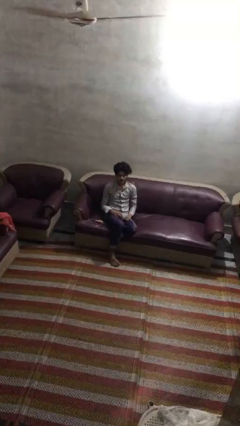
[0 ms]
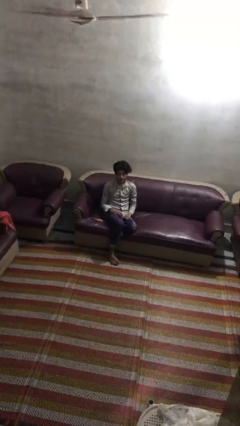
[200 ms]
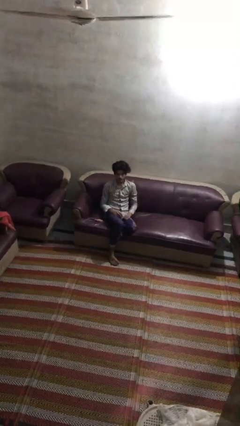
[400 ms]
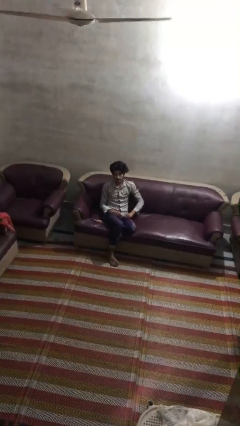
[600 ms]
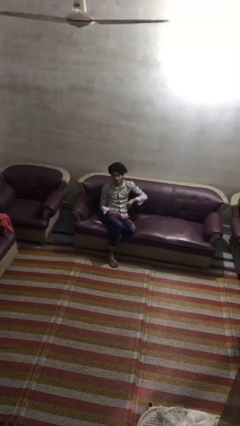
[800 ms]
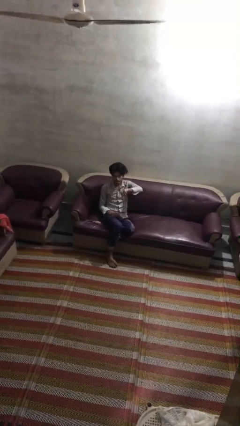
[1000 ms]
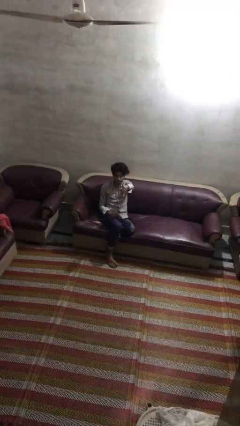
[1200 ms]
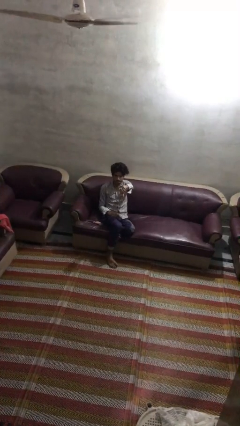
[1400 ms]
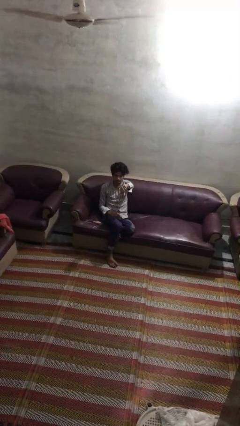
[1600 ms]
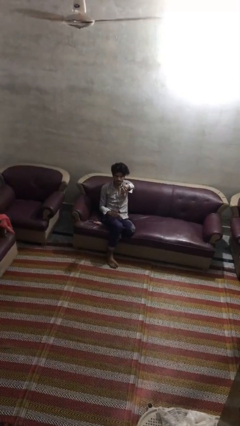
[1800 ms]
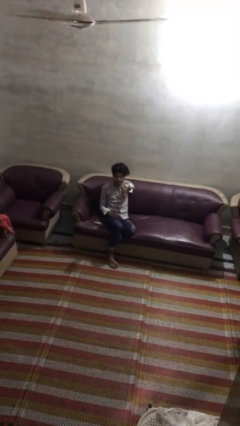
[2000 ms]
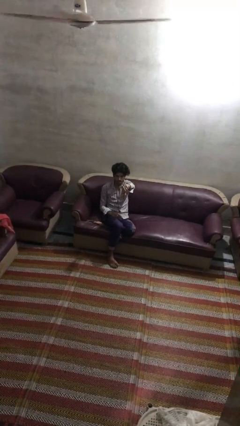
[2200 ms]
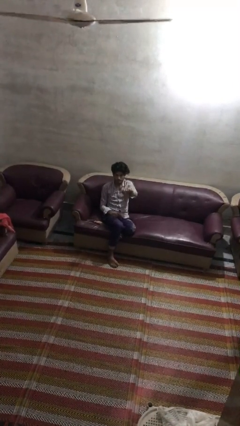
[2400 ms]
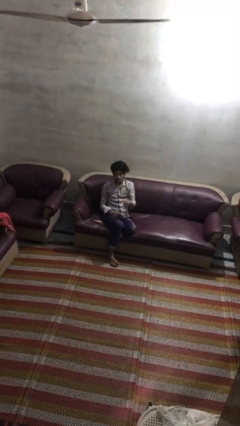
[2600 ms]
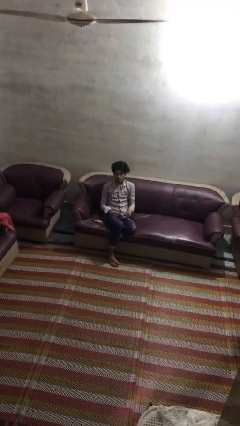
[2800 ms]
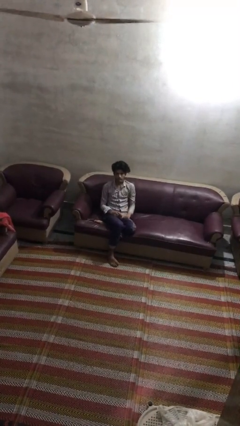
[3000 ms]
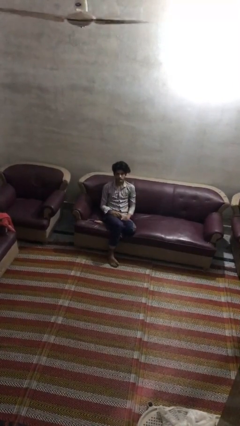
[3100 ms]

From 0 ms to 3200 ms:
person gestures thumbs down

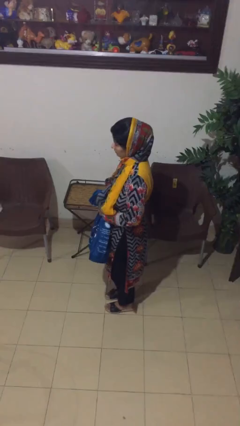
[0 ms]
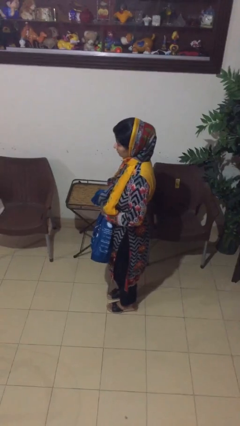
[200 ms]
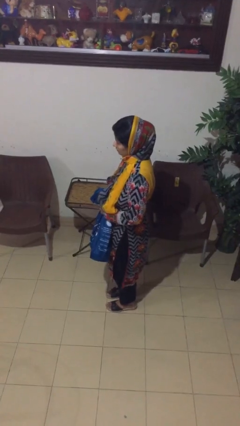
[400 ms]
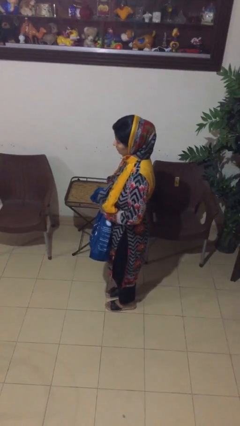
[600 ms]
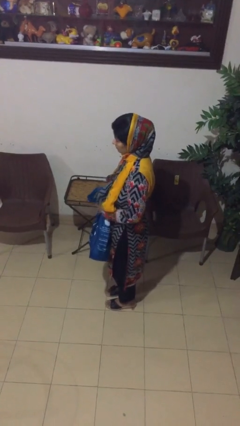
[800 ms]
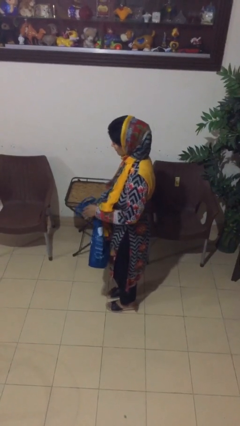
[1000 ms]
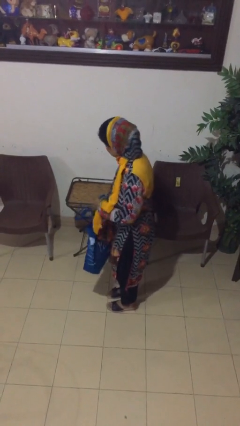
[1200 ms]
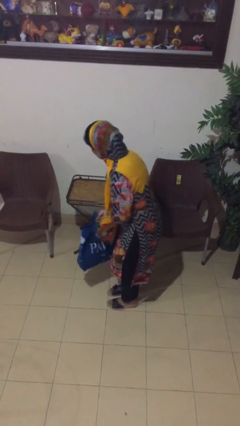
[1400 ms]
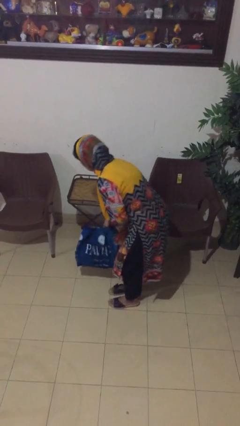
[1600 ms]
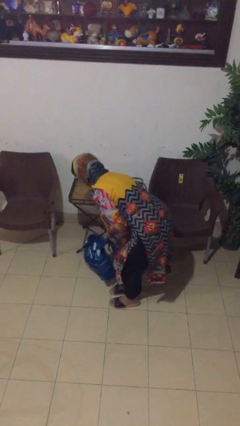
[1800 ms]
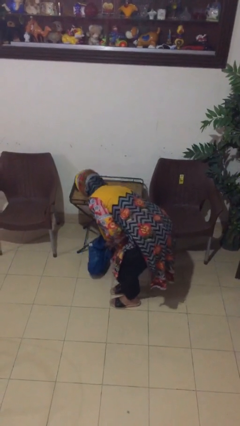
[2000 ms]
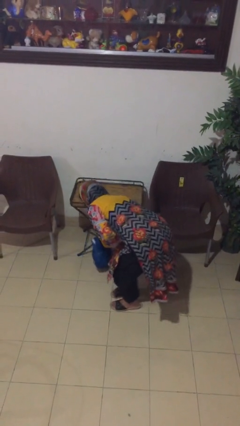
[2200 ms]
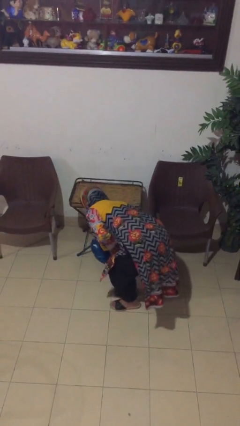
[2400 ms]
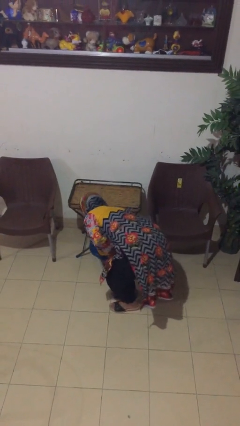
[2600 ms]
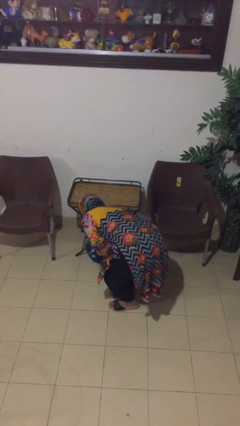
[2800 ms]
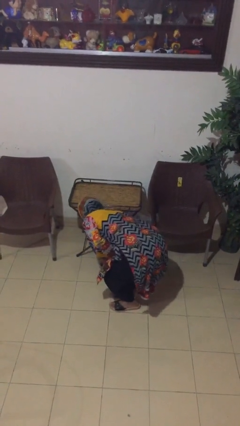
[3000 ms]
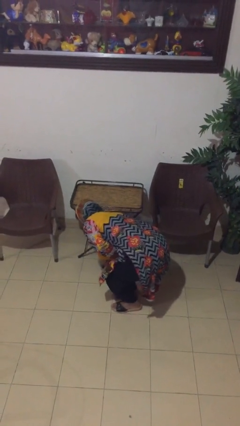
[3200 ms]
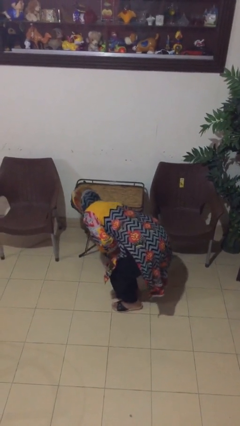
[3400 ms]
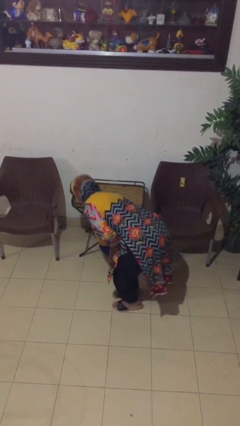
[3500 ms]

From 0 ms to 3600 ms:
person puts down object on table

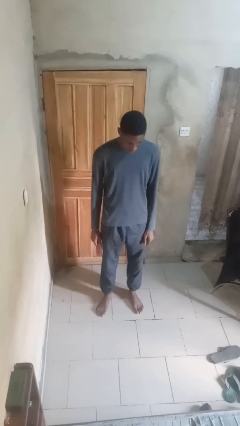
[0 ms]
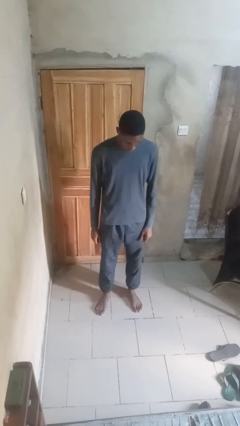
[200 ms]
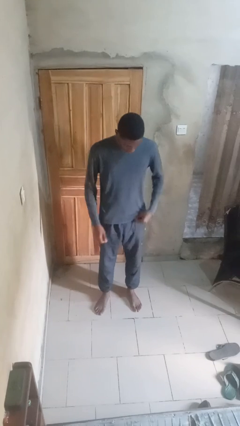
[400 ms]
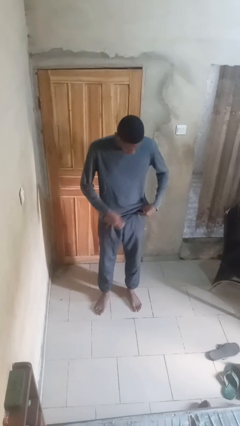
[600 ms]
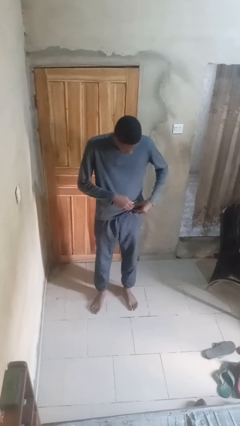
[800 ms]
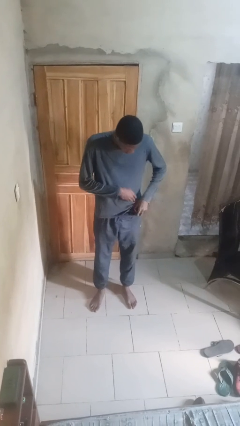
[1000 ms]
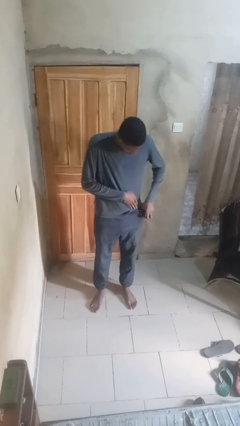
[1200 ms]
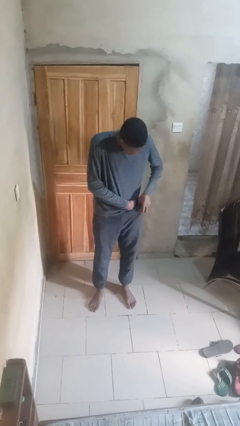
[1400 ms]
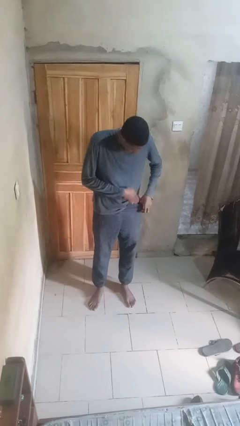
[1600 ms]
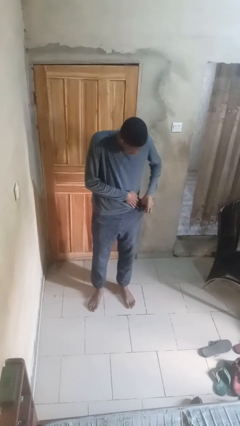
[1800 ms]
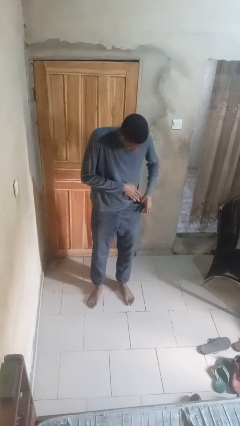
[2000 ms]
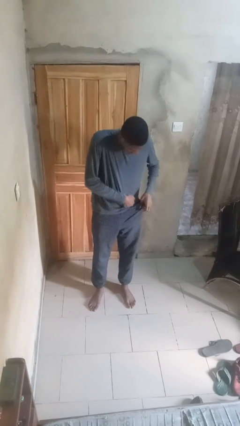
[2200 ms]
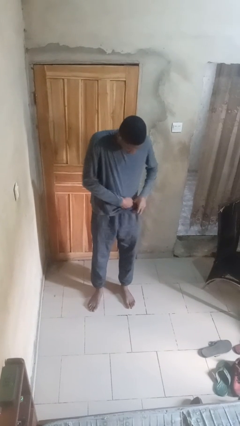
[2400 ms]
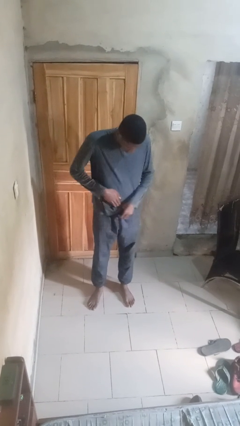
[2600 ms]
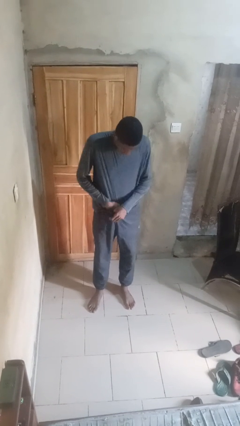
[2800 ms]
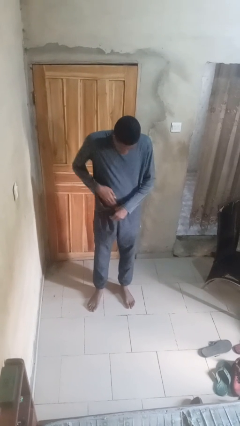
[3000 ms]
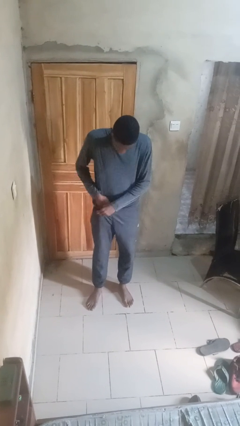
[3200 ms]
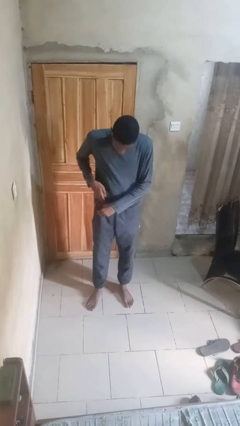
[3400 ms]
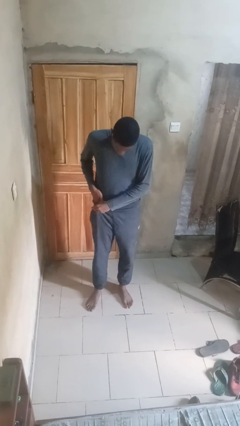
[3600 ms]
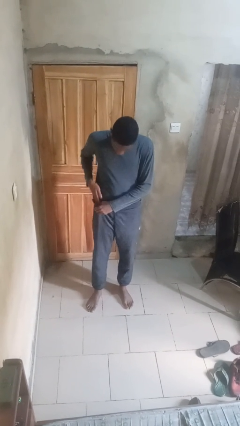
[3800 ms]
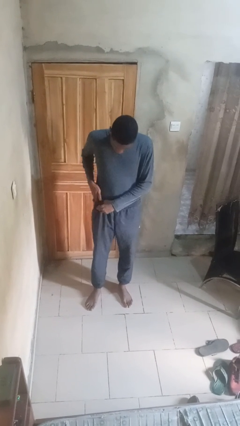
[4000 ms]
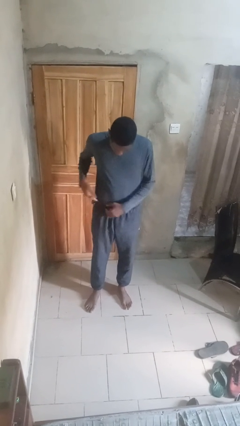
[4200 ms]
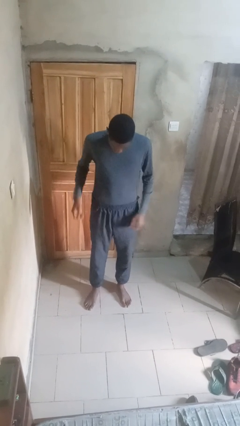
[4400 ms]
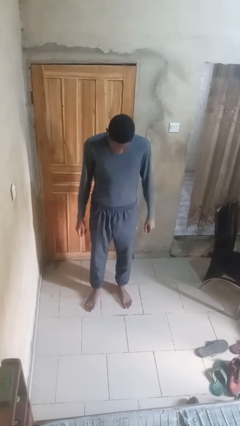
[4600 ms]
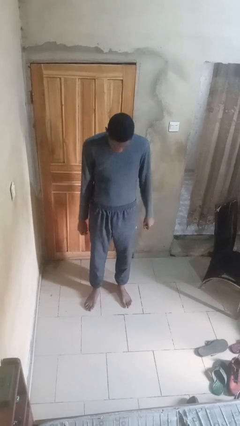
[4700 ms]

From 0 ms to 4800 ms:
person tucks in shirt

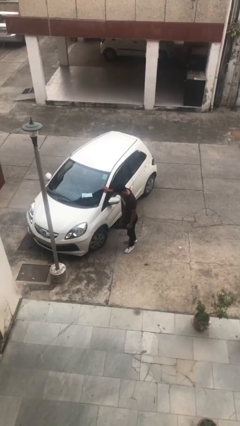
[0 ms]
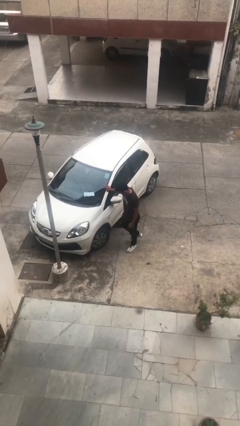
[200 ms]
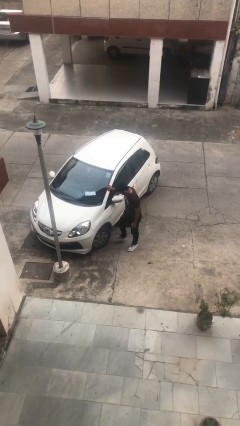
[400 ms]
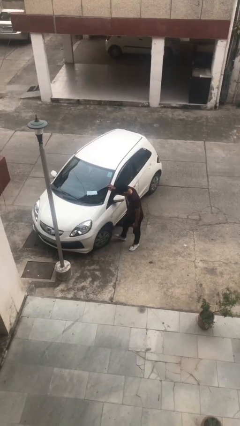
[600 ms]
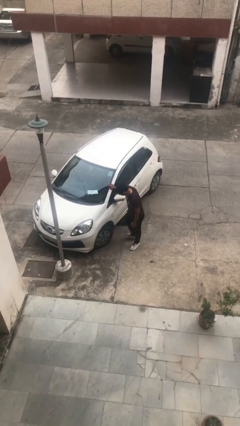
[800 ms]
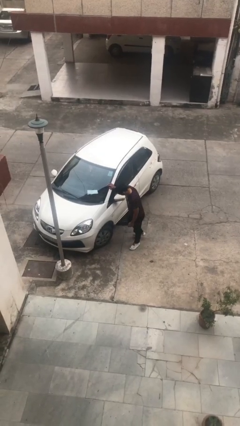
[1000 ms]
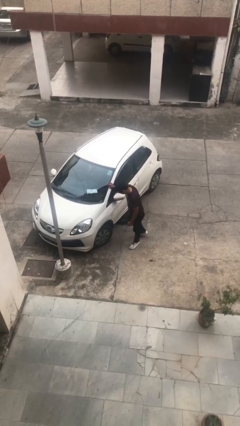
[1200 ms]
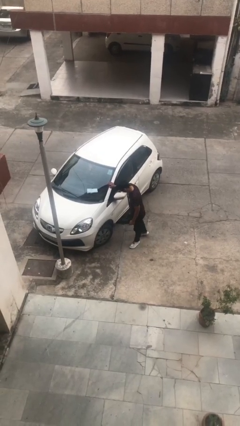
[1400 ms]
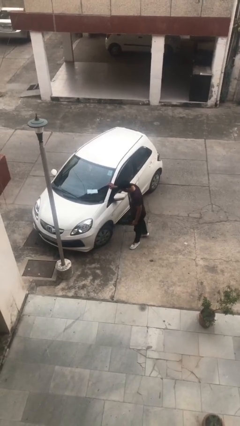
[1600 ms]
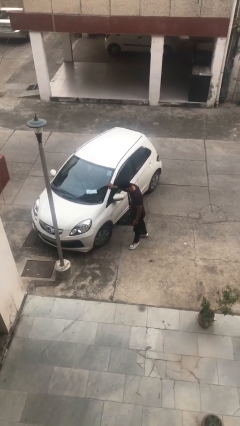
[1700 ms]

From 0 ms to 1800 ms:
person kicks car tires

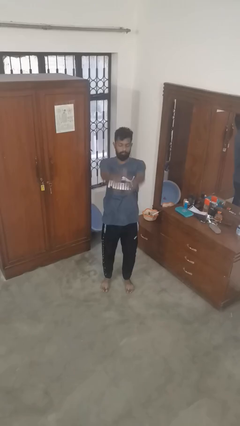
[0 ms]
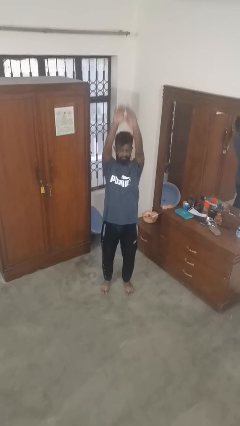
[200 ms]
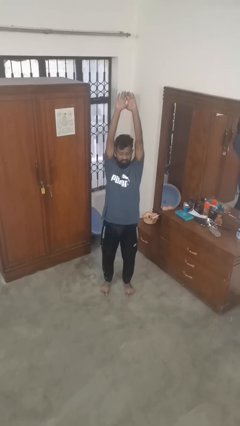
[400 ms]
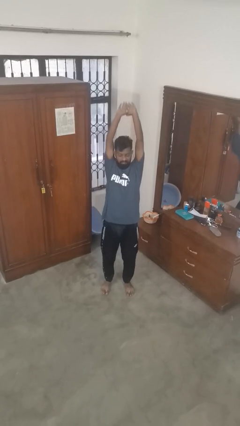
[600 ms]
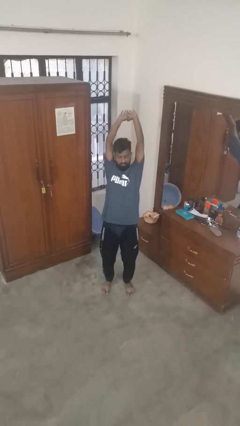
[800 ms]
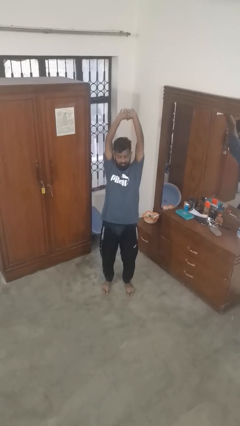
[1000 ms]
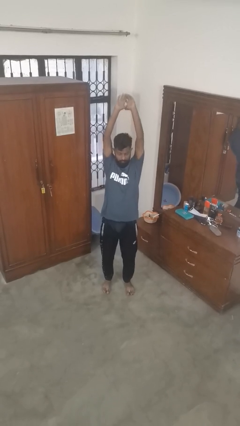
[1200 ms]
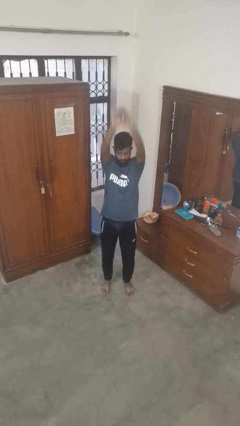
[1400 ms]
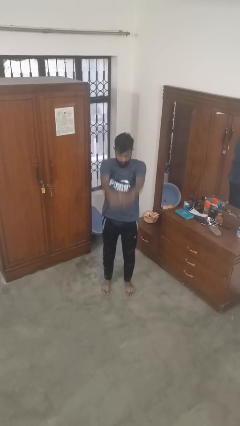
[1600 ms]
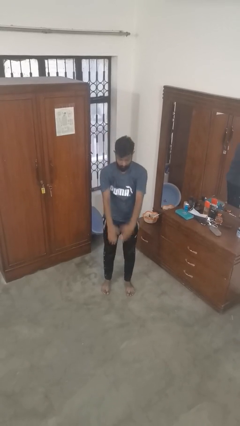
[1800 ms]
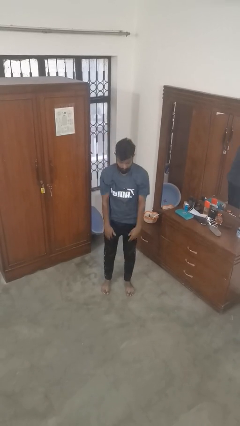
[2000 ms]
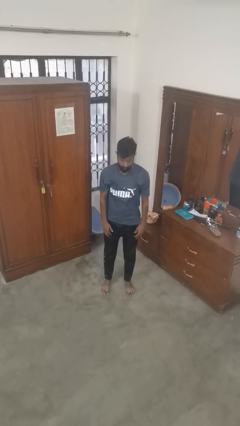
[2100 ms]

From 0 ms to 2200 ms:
person stretches arms over head

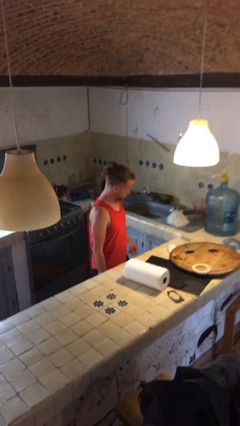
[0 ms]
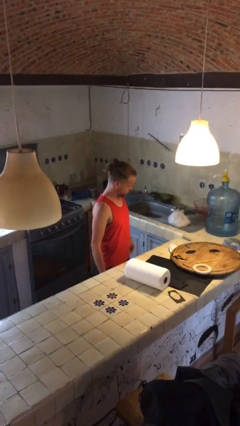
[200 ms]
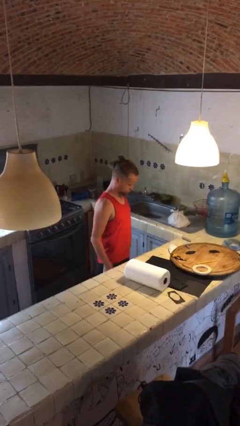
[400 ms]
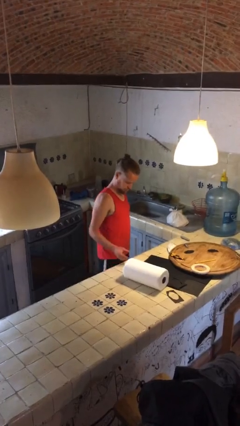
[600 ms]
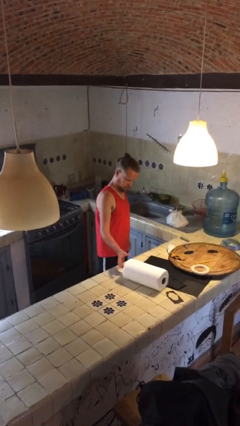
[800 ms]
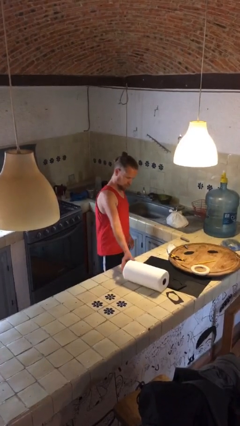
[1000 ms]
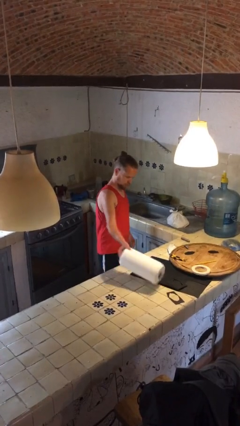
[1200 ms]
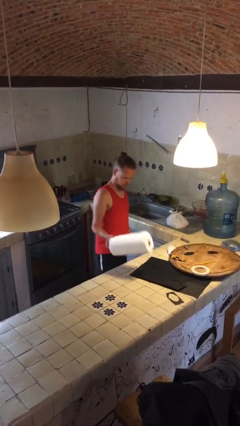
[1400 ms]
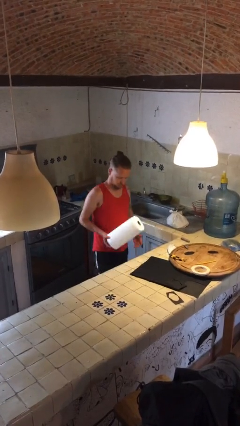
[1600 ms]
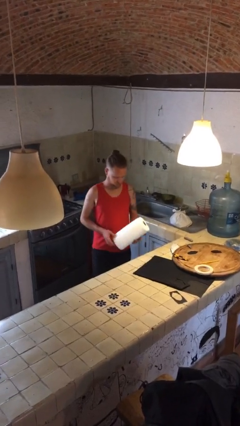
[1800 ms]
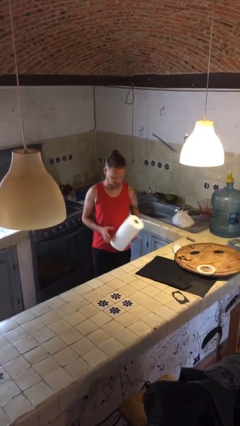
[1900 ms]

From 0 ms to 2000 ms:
person picks up object from countertop
